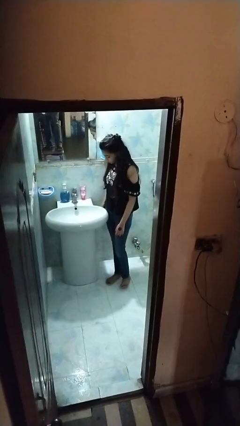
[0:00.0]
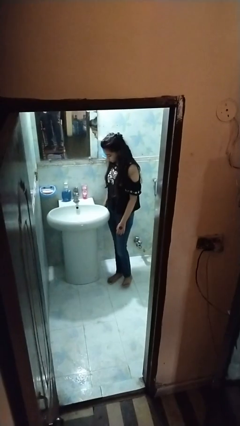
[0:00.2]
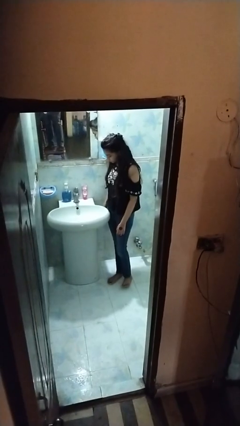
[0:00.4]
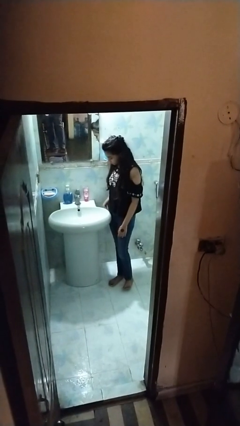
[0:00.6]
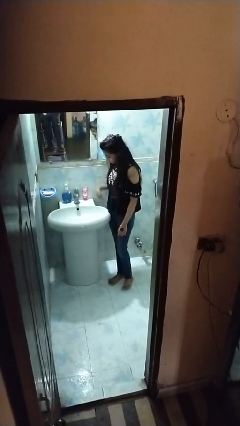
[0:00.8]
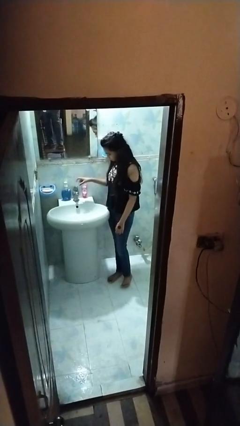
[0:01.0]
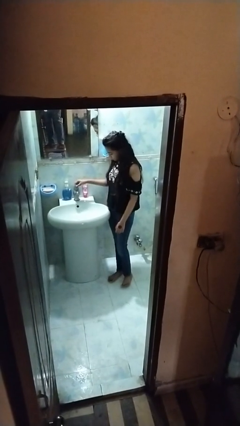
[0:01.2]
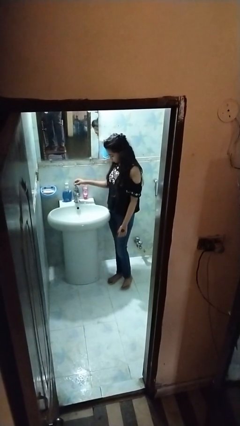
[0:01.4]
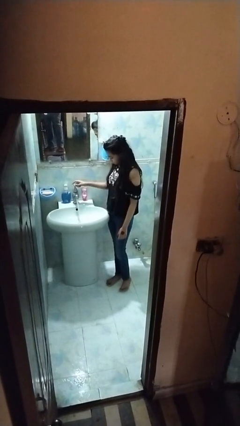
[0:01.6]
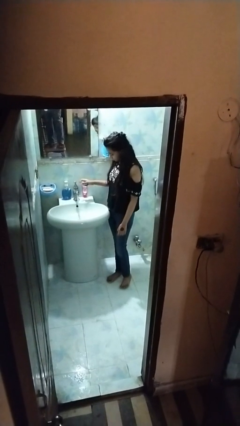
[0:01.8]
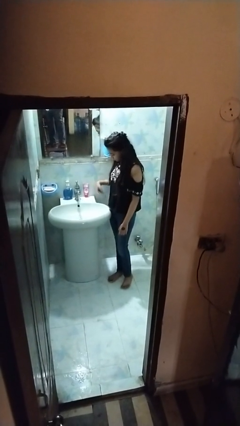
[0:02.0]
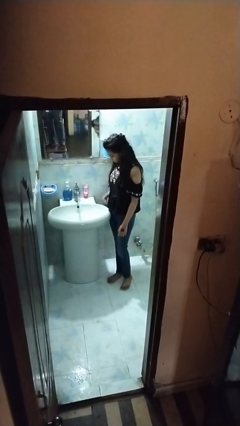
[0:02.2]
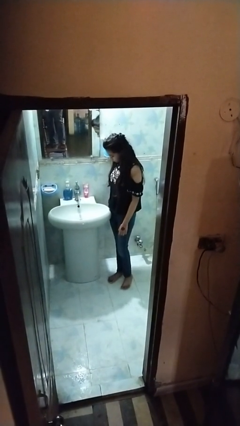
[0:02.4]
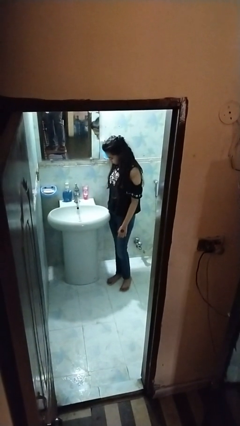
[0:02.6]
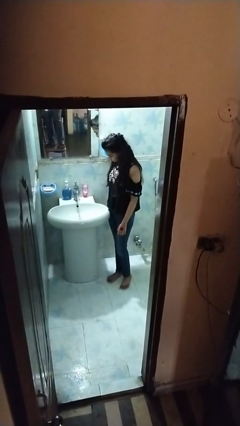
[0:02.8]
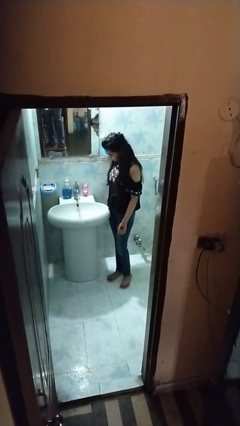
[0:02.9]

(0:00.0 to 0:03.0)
person turns on faucet

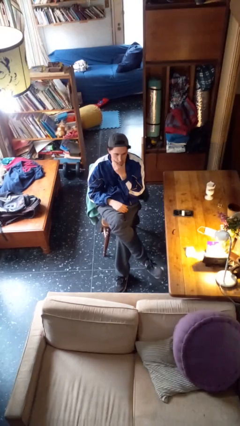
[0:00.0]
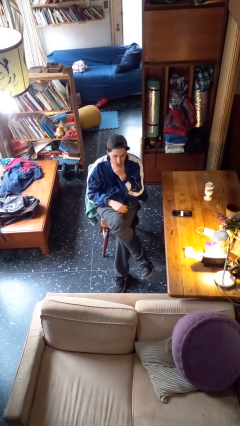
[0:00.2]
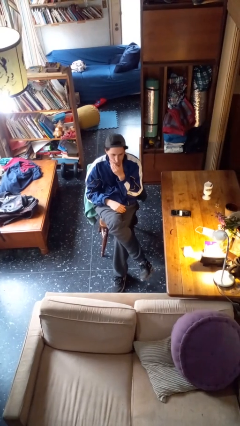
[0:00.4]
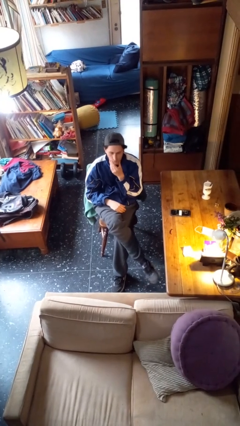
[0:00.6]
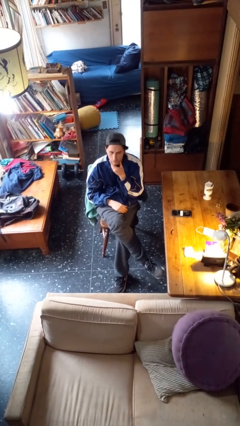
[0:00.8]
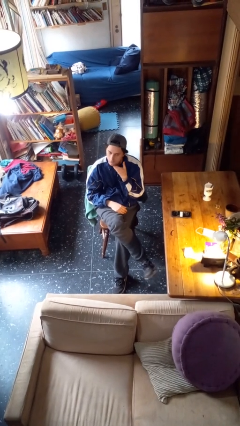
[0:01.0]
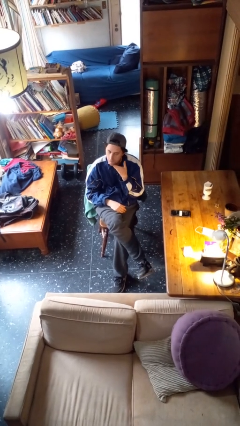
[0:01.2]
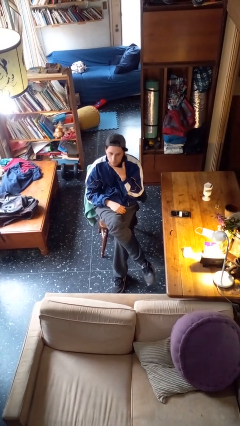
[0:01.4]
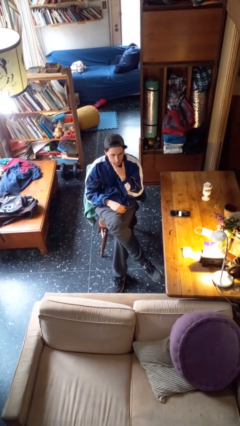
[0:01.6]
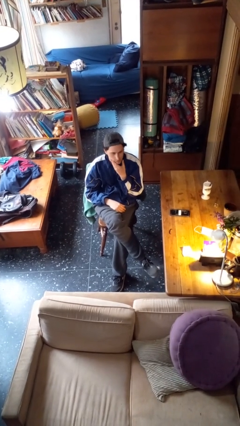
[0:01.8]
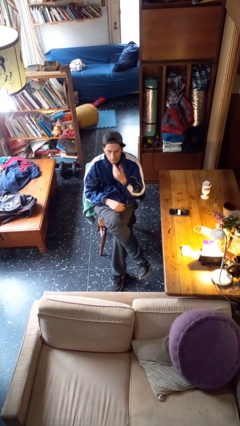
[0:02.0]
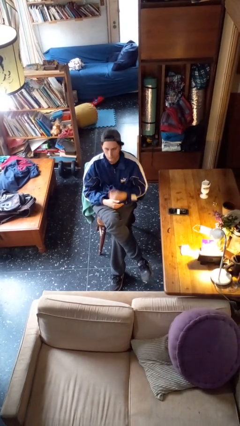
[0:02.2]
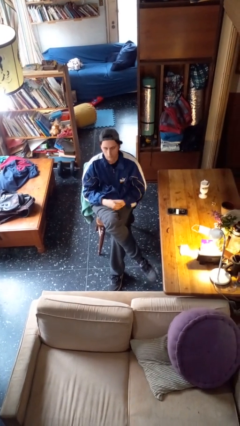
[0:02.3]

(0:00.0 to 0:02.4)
person strokes chin

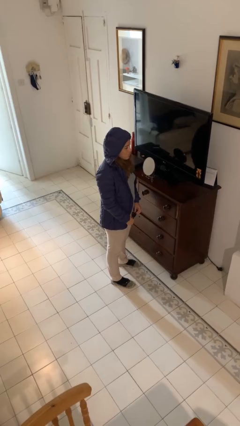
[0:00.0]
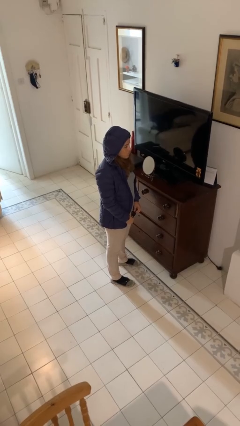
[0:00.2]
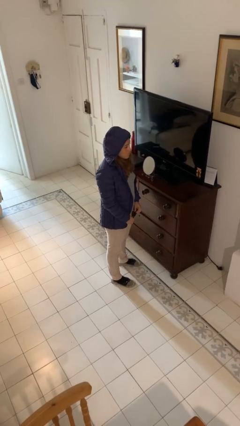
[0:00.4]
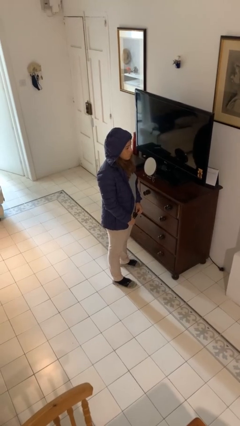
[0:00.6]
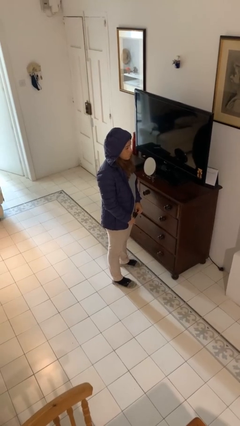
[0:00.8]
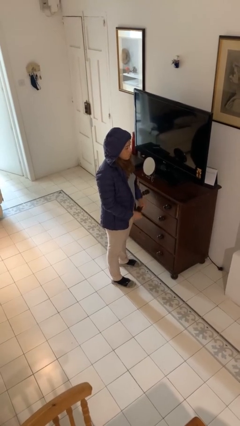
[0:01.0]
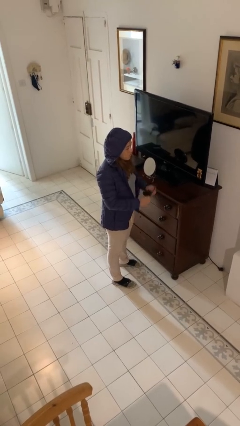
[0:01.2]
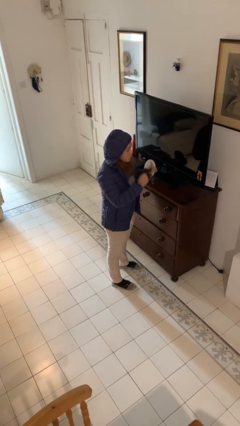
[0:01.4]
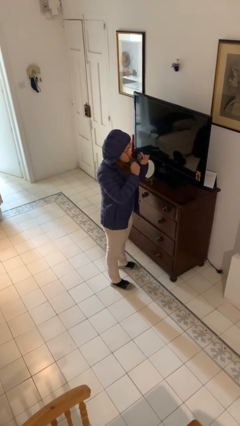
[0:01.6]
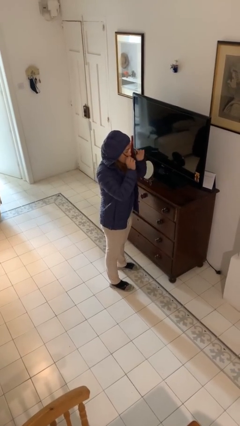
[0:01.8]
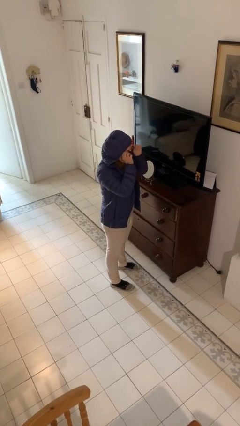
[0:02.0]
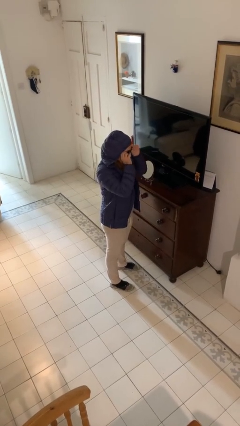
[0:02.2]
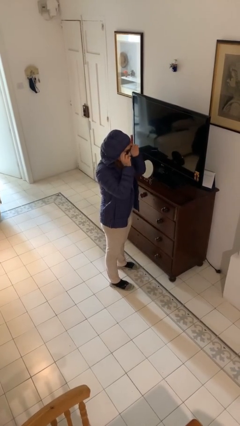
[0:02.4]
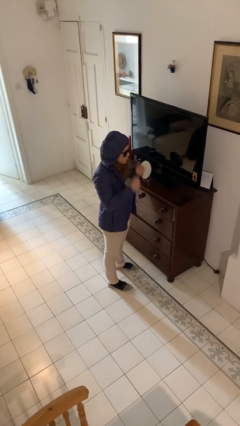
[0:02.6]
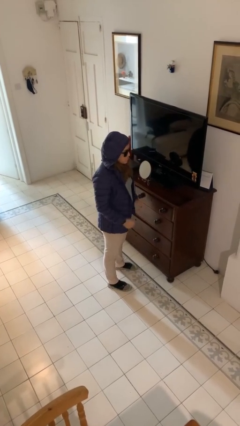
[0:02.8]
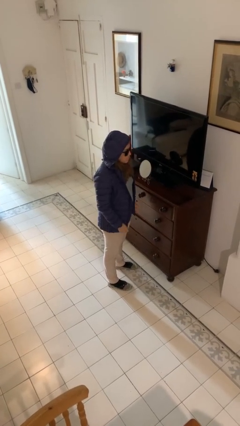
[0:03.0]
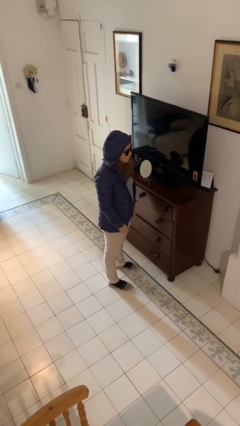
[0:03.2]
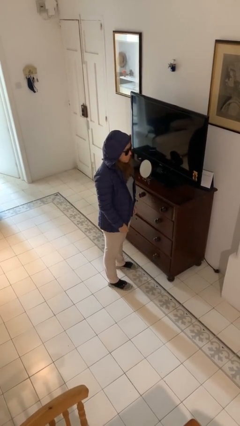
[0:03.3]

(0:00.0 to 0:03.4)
person puts on sunglasses

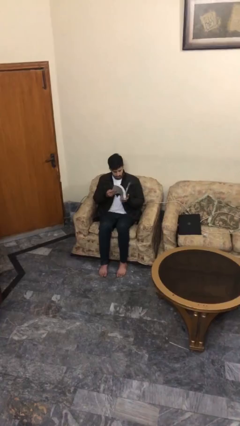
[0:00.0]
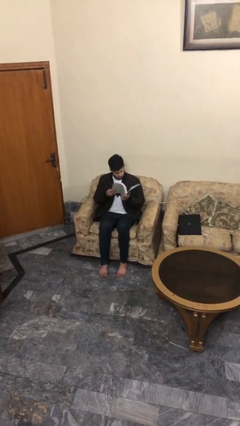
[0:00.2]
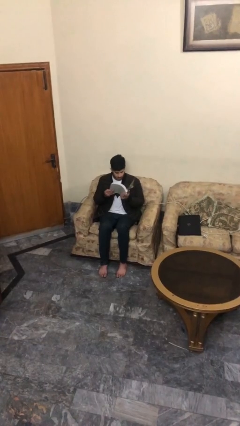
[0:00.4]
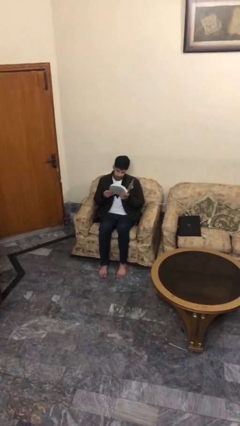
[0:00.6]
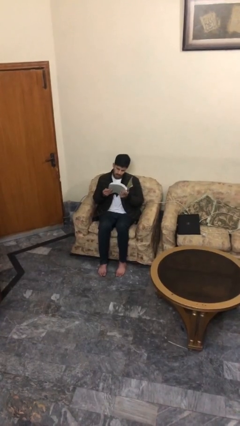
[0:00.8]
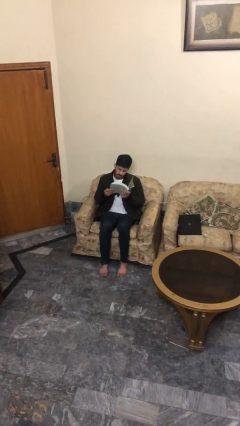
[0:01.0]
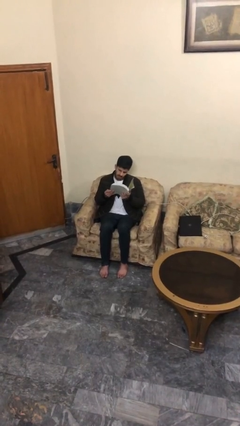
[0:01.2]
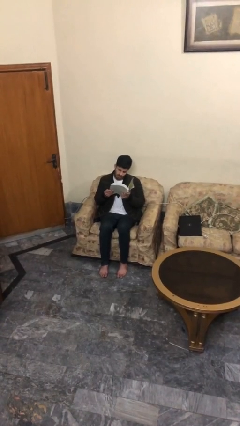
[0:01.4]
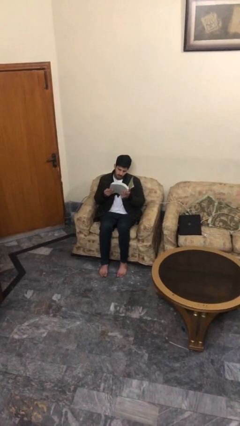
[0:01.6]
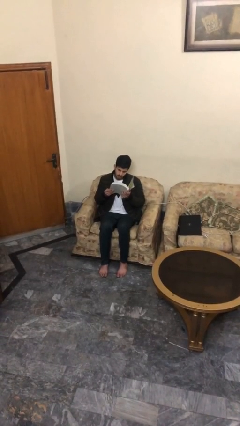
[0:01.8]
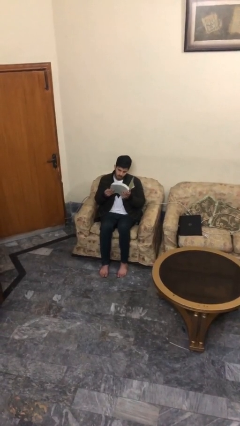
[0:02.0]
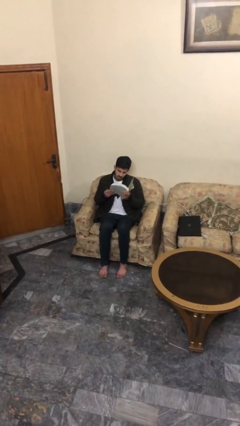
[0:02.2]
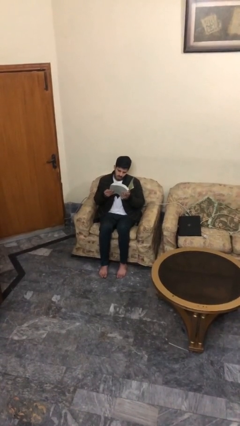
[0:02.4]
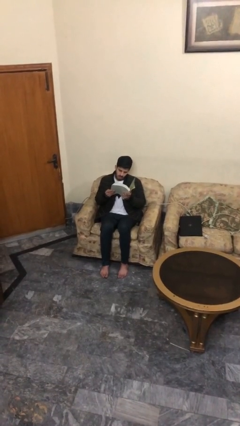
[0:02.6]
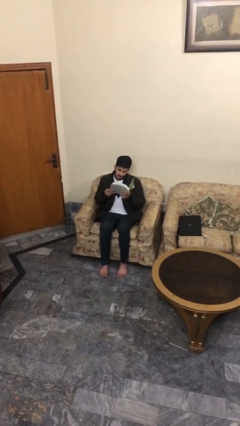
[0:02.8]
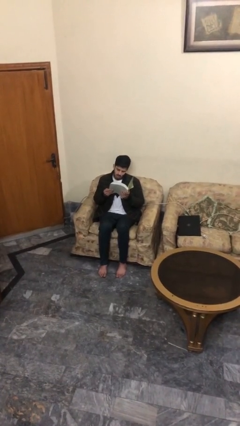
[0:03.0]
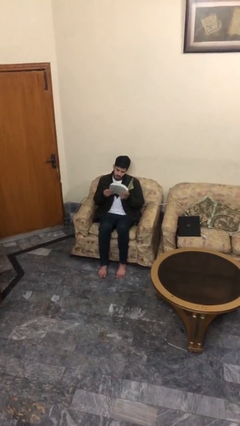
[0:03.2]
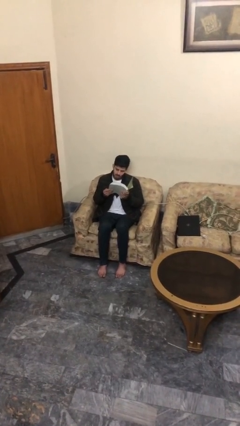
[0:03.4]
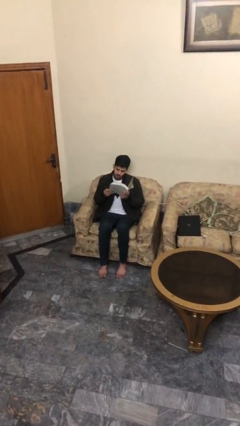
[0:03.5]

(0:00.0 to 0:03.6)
person reads document

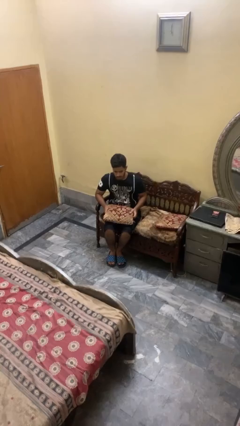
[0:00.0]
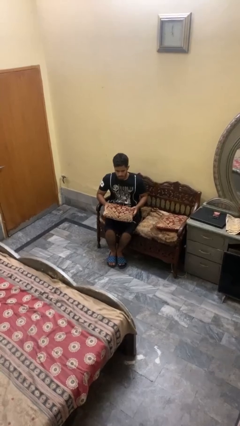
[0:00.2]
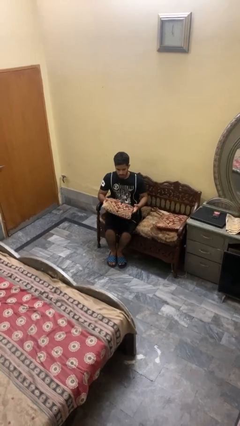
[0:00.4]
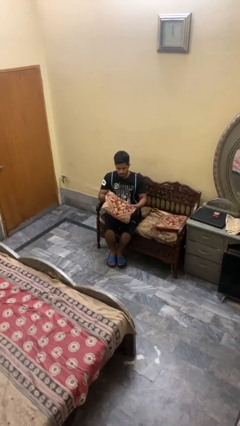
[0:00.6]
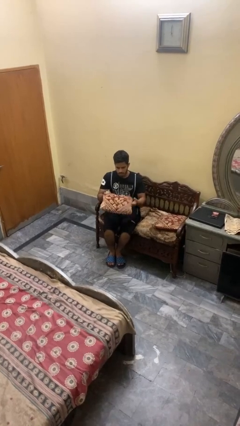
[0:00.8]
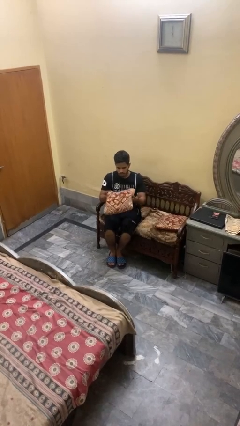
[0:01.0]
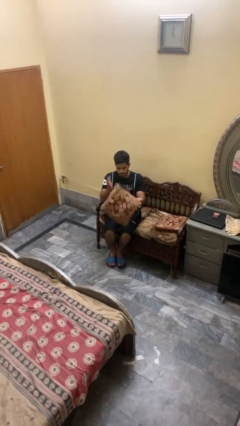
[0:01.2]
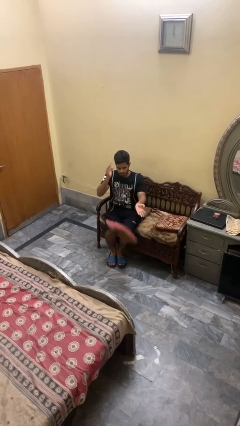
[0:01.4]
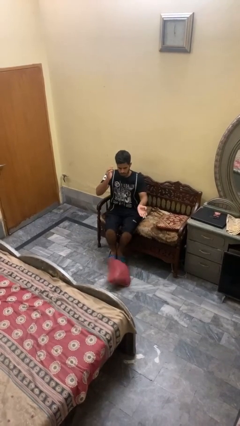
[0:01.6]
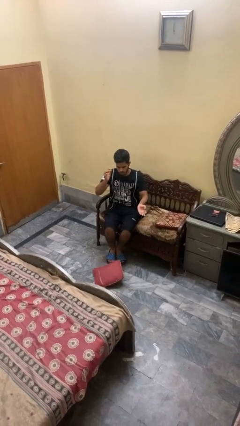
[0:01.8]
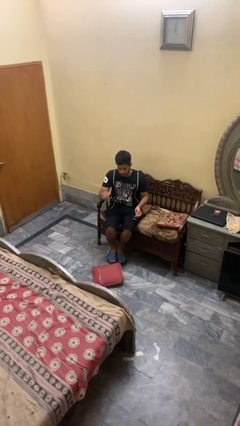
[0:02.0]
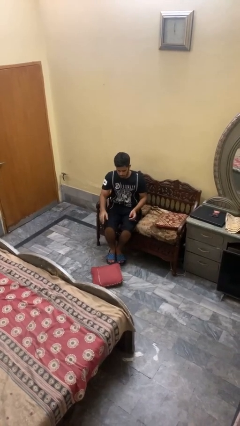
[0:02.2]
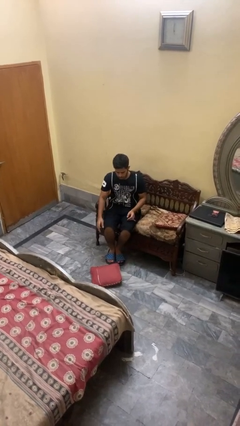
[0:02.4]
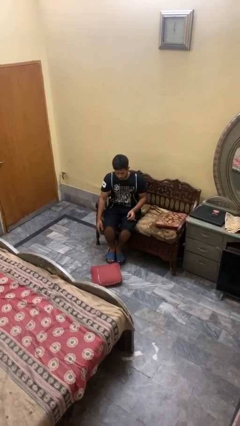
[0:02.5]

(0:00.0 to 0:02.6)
person drops object

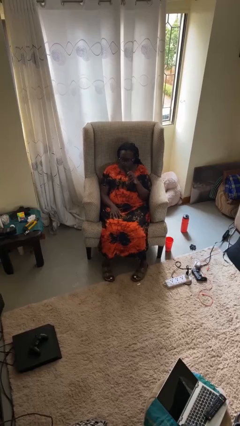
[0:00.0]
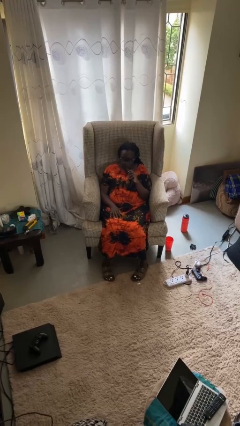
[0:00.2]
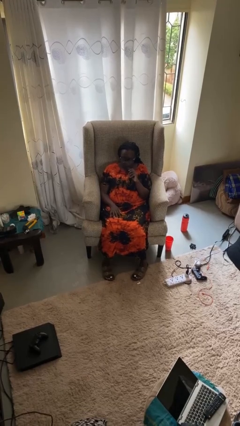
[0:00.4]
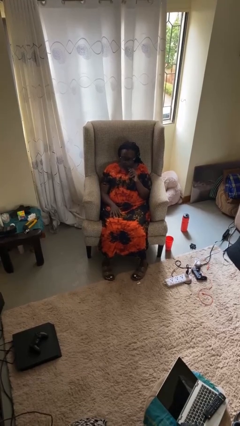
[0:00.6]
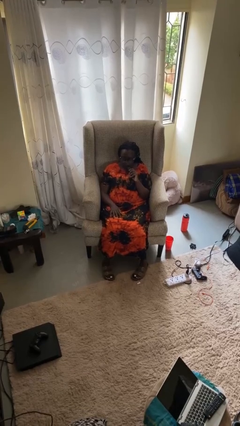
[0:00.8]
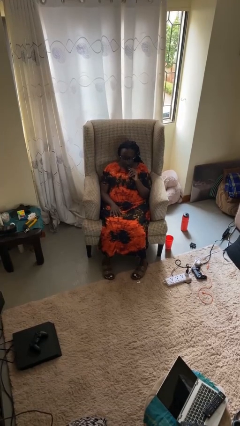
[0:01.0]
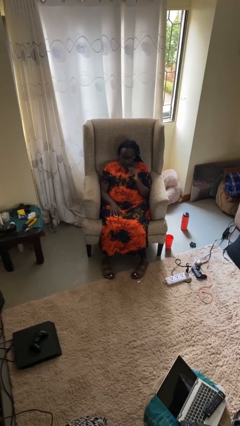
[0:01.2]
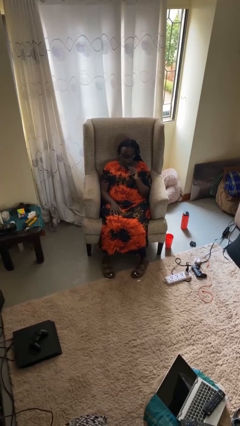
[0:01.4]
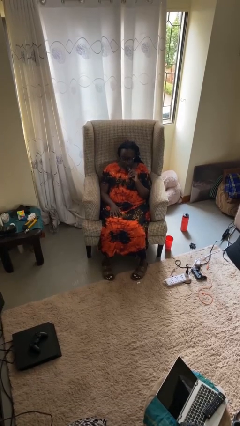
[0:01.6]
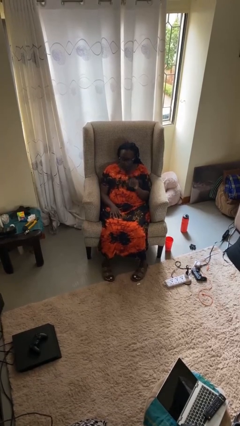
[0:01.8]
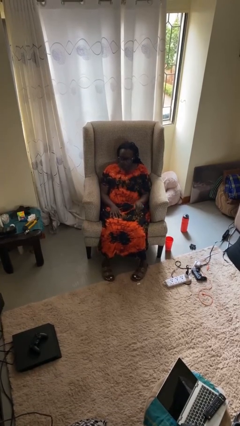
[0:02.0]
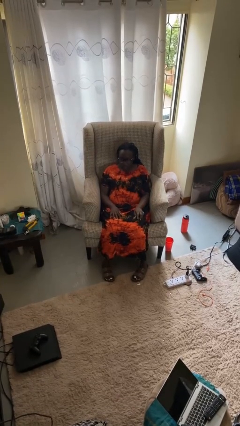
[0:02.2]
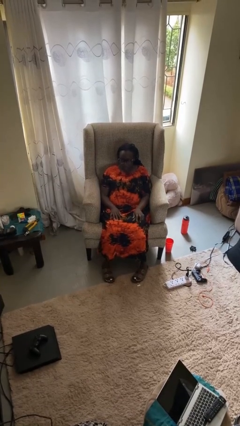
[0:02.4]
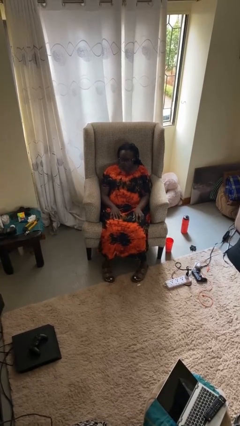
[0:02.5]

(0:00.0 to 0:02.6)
person vapes
